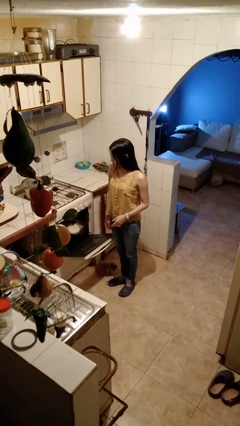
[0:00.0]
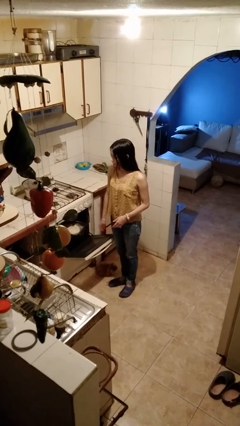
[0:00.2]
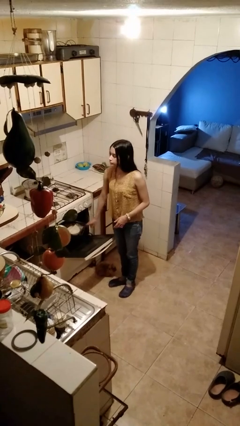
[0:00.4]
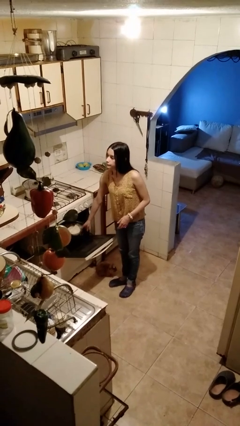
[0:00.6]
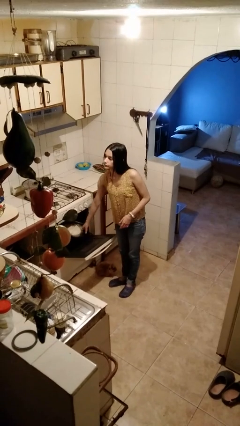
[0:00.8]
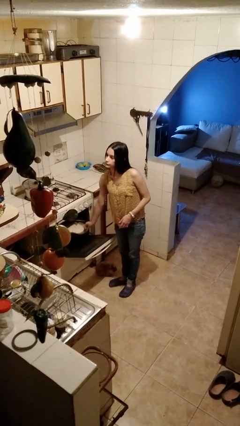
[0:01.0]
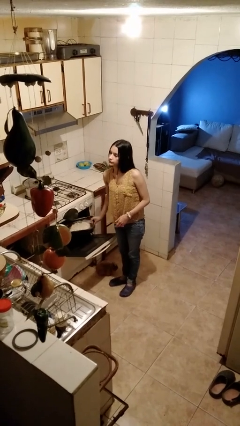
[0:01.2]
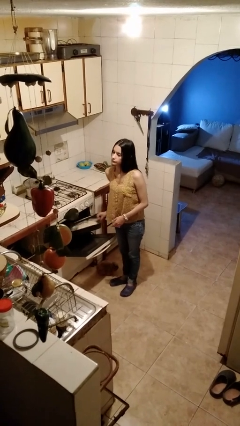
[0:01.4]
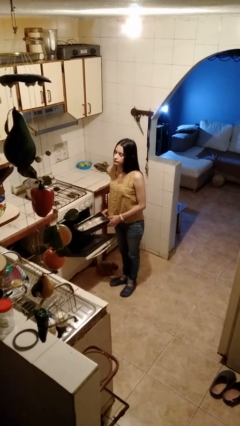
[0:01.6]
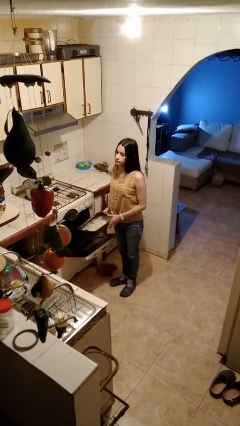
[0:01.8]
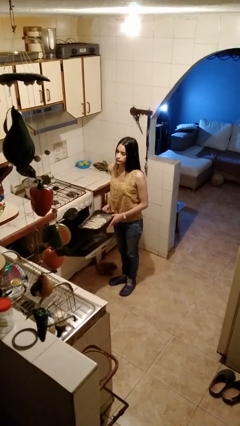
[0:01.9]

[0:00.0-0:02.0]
person takes object from oven

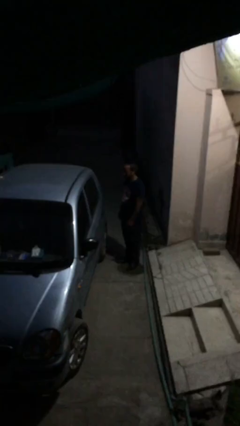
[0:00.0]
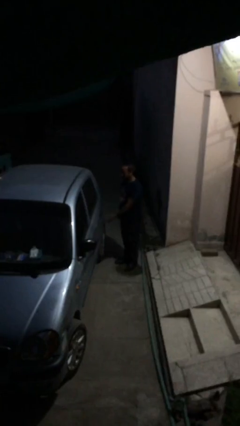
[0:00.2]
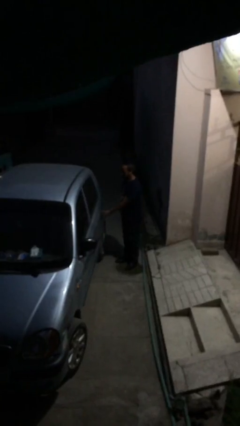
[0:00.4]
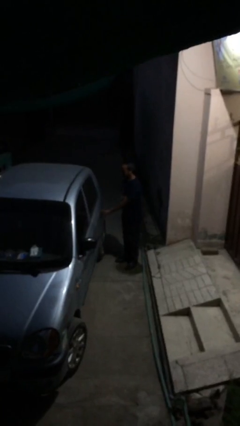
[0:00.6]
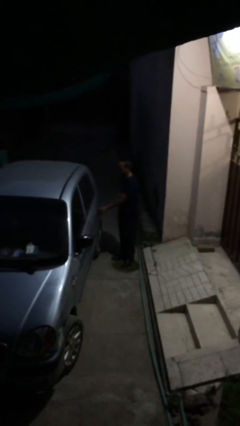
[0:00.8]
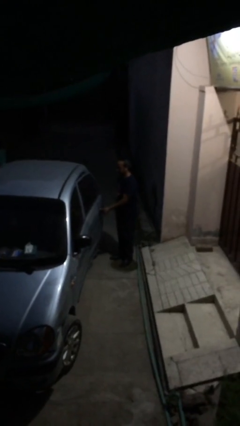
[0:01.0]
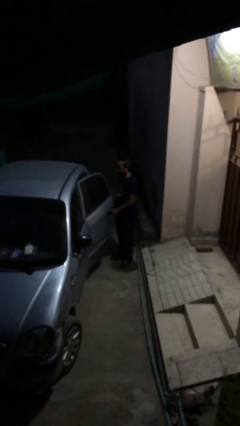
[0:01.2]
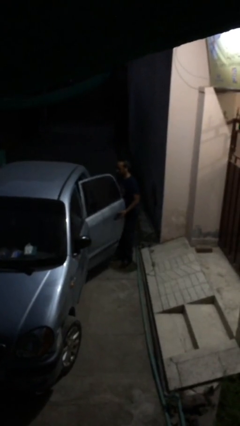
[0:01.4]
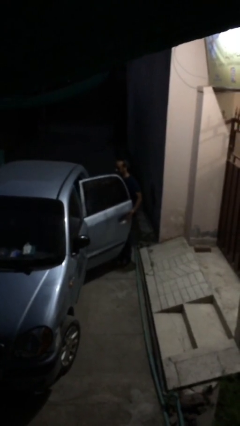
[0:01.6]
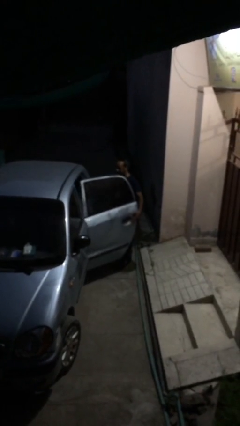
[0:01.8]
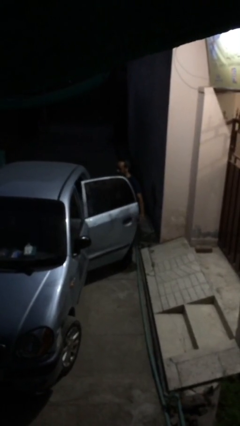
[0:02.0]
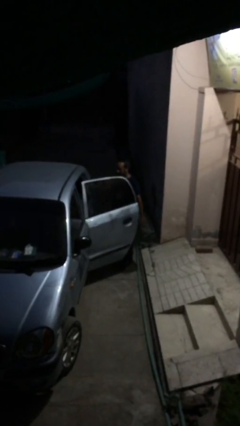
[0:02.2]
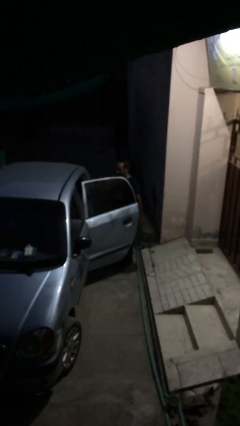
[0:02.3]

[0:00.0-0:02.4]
person opens car door

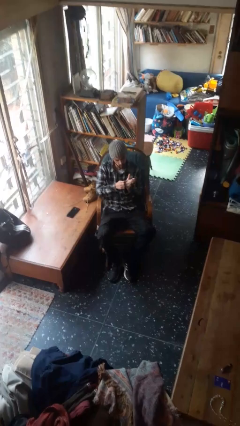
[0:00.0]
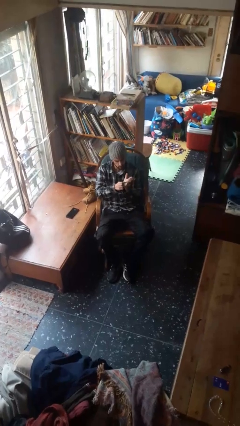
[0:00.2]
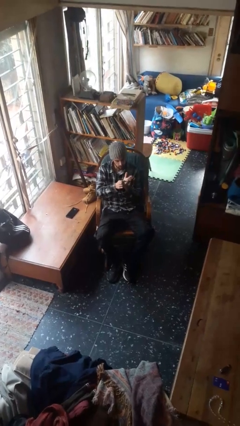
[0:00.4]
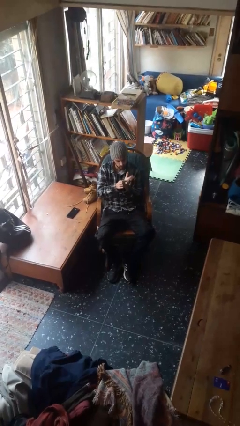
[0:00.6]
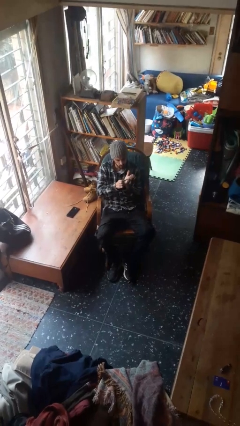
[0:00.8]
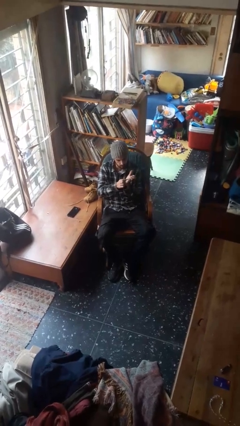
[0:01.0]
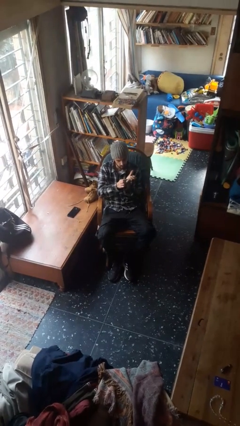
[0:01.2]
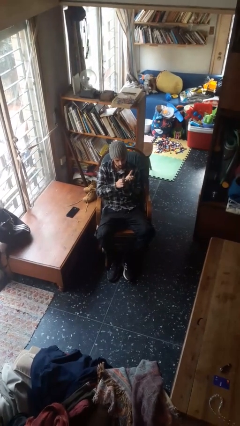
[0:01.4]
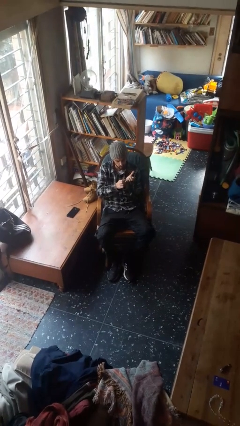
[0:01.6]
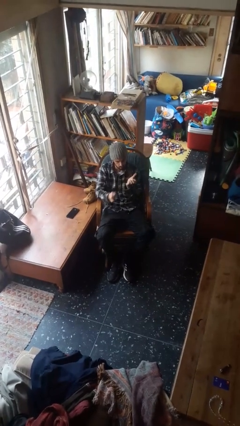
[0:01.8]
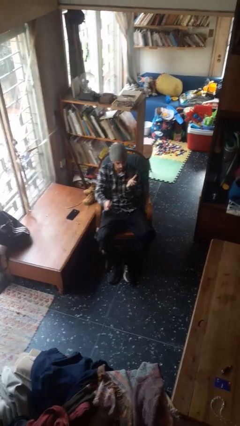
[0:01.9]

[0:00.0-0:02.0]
person files fingernails

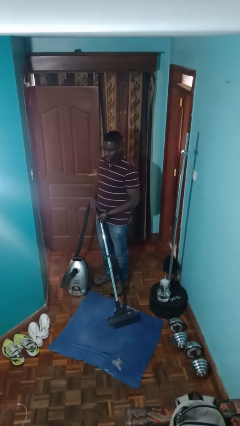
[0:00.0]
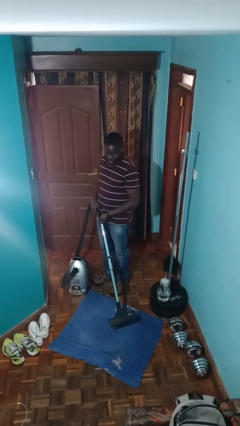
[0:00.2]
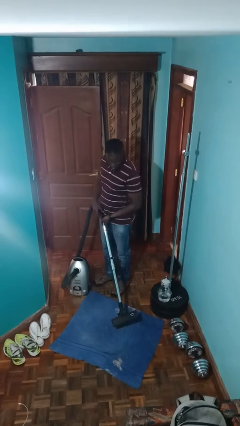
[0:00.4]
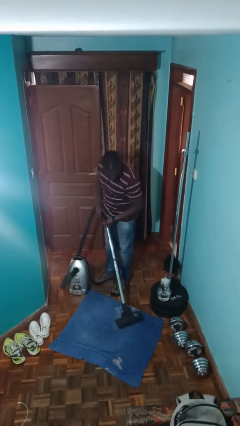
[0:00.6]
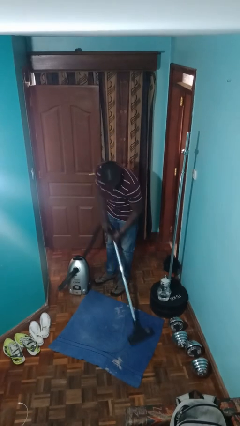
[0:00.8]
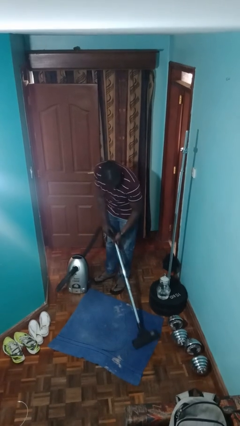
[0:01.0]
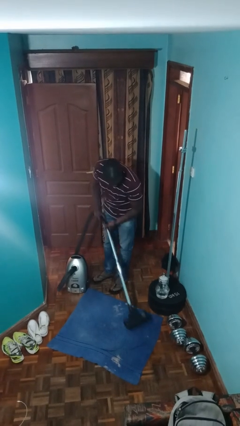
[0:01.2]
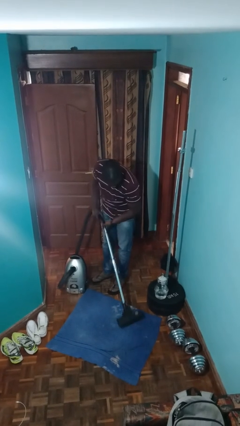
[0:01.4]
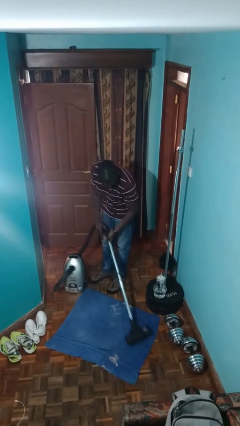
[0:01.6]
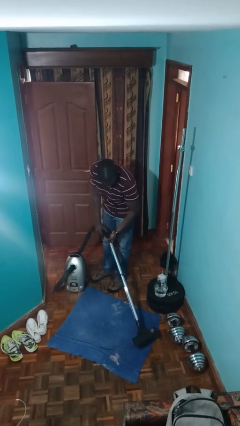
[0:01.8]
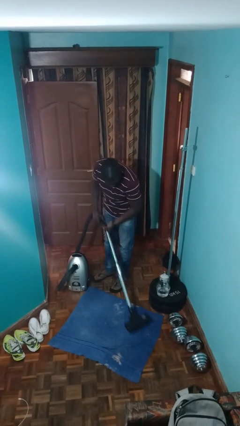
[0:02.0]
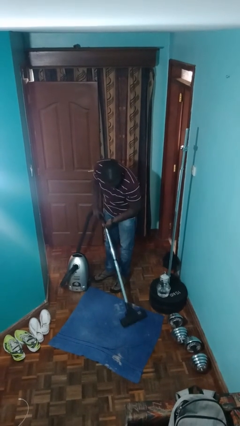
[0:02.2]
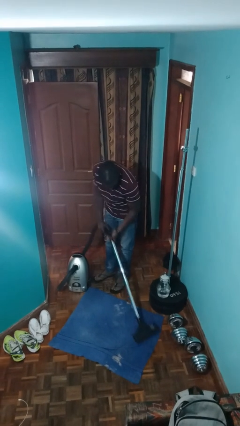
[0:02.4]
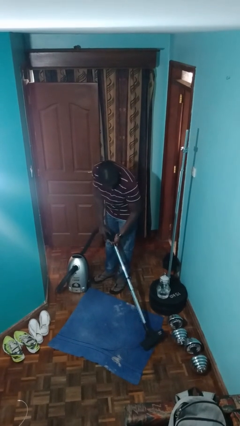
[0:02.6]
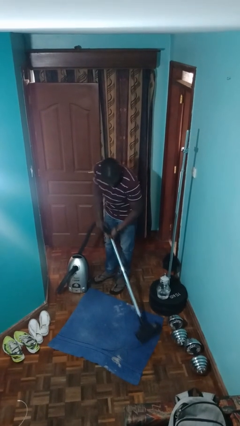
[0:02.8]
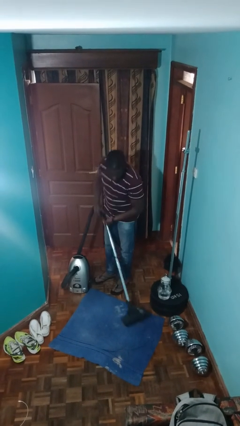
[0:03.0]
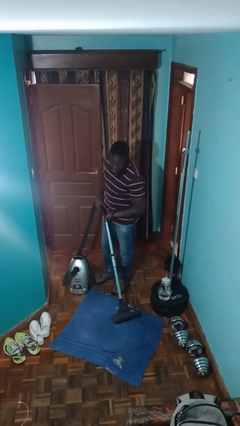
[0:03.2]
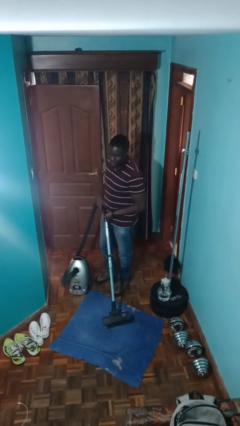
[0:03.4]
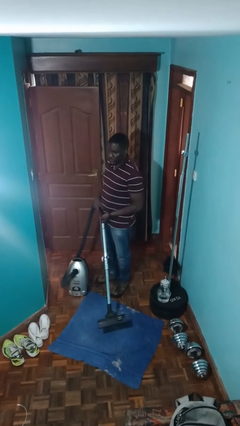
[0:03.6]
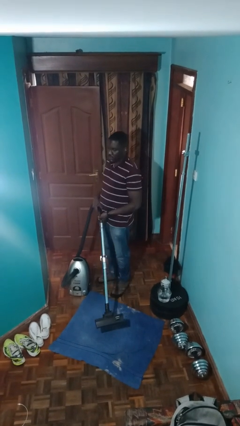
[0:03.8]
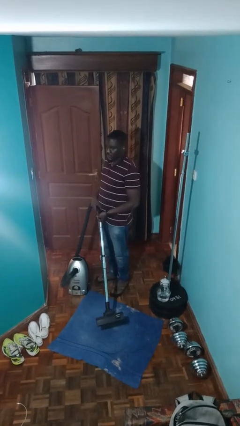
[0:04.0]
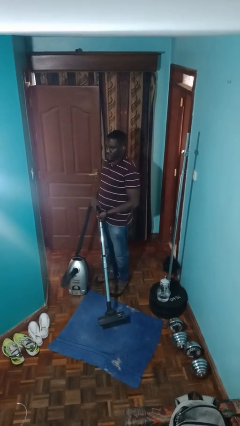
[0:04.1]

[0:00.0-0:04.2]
person vacuums carpet

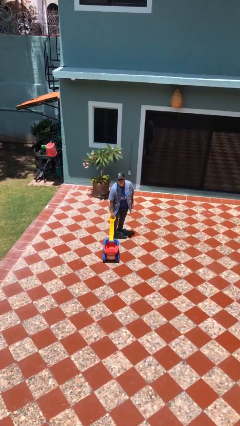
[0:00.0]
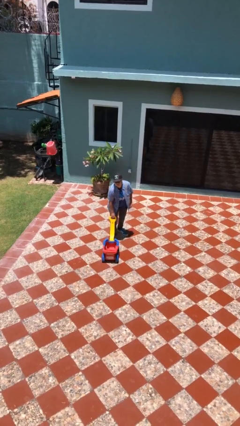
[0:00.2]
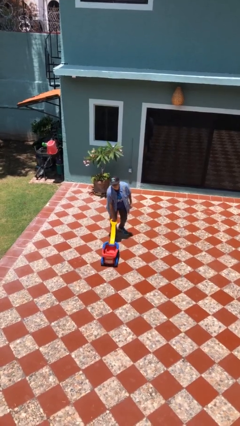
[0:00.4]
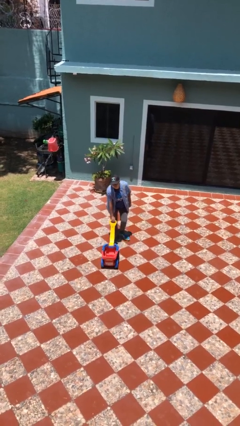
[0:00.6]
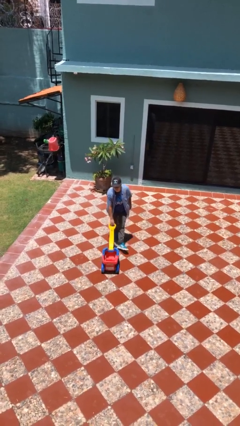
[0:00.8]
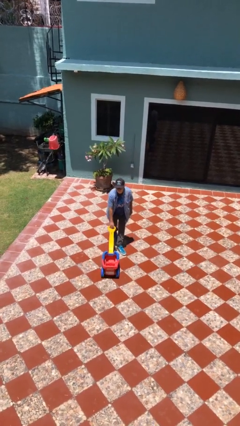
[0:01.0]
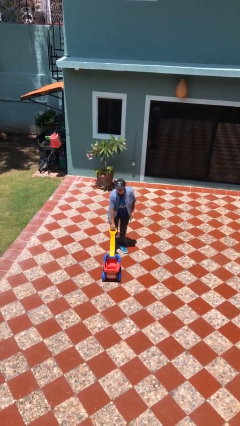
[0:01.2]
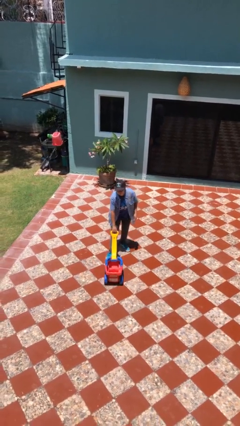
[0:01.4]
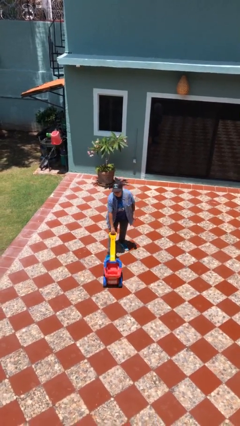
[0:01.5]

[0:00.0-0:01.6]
person pushes wheeled cart

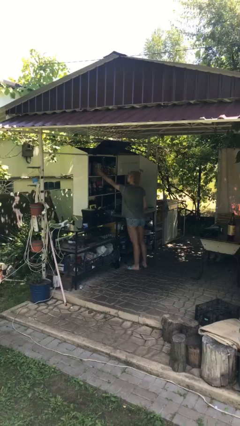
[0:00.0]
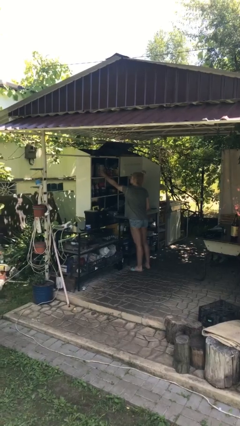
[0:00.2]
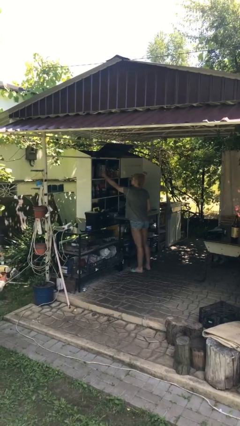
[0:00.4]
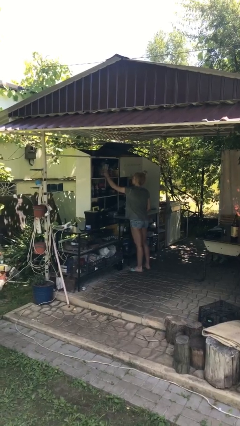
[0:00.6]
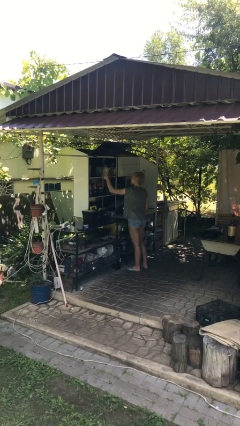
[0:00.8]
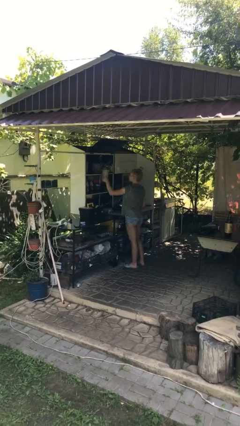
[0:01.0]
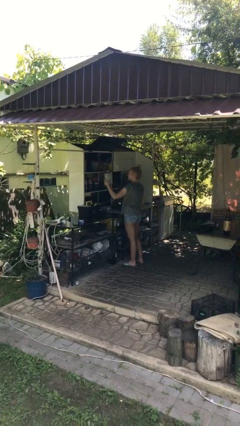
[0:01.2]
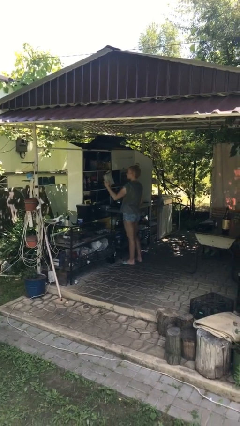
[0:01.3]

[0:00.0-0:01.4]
person picks up object from shelf

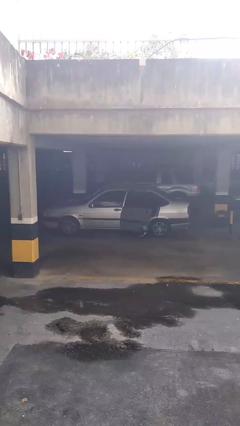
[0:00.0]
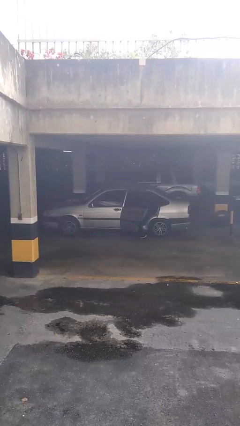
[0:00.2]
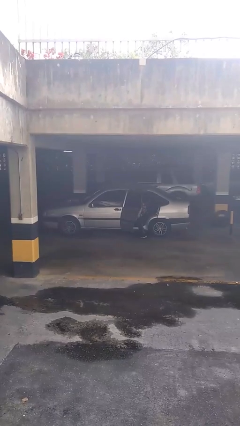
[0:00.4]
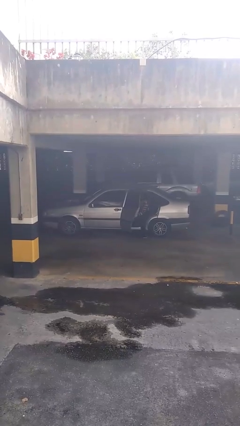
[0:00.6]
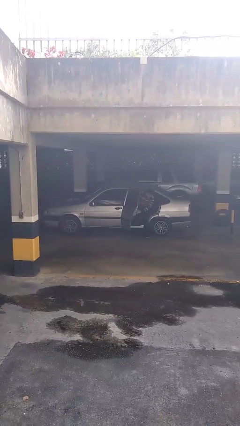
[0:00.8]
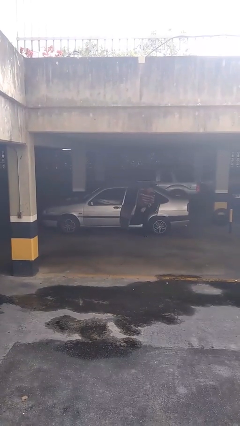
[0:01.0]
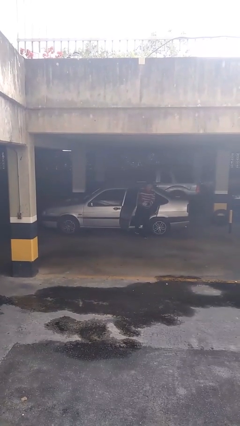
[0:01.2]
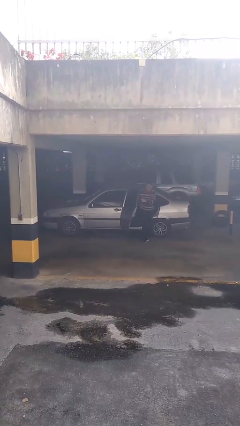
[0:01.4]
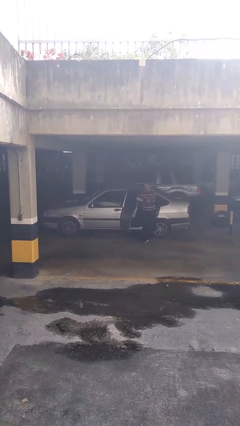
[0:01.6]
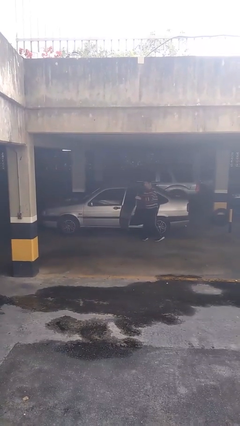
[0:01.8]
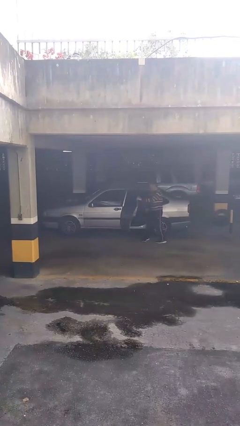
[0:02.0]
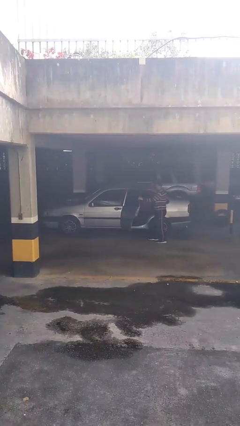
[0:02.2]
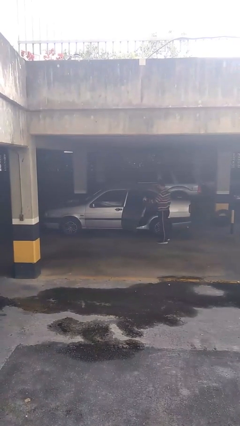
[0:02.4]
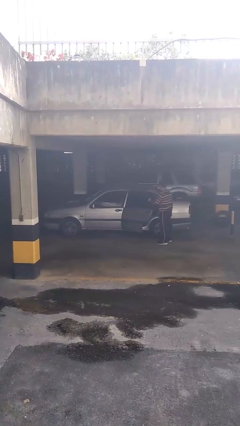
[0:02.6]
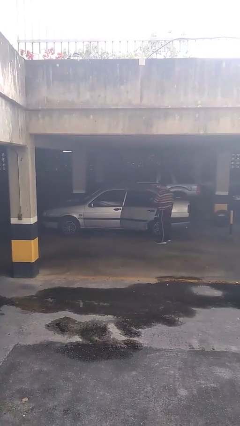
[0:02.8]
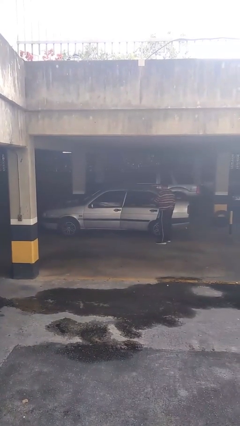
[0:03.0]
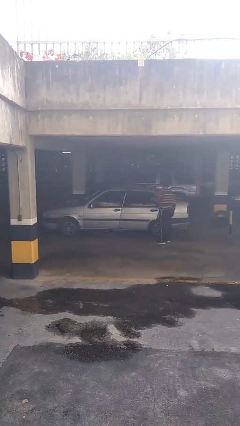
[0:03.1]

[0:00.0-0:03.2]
car drops off person

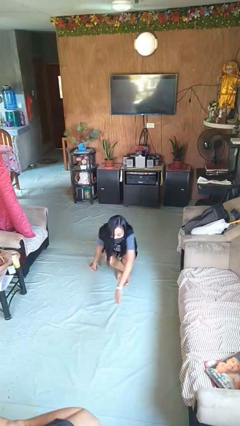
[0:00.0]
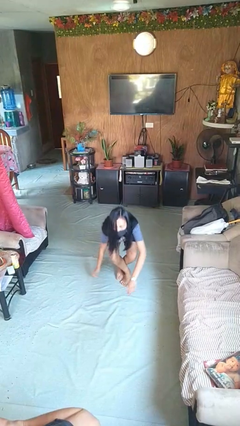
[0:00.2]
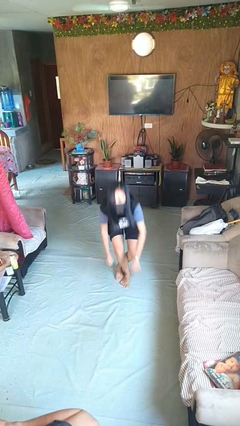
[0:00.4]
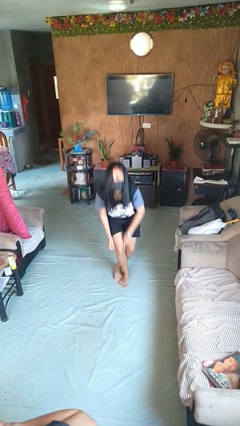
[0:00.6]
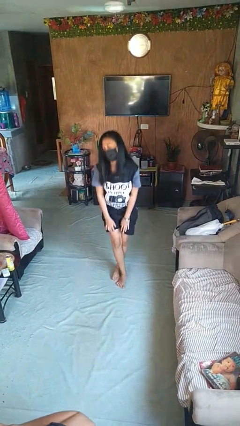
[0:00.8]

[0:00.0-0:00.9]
person stands up from floor
